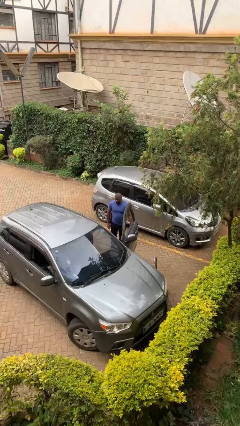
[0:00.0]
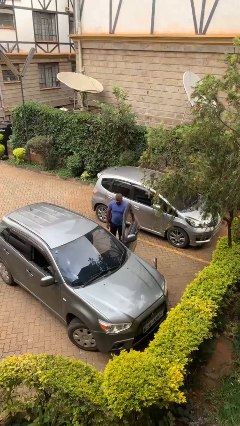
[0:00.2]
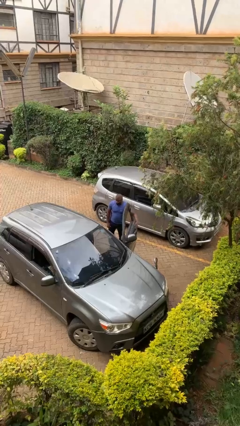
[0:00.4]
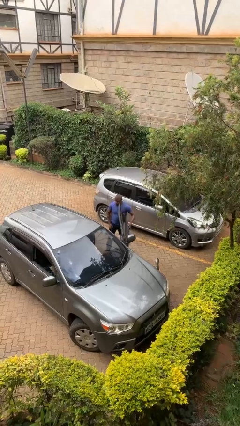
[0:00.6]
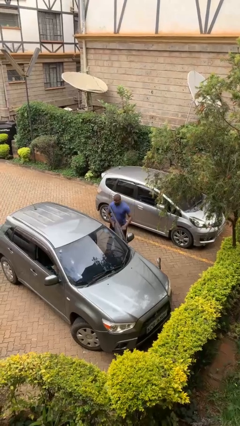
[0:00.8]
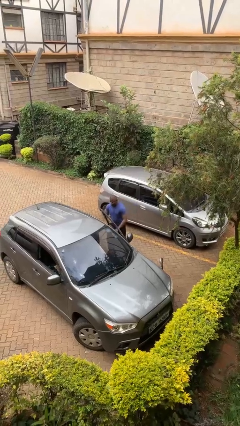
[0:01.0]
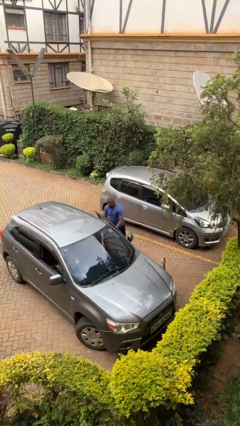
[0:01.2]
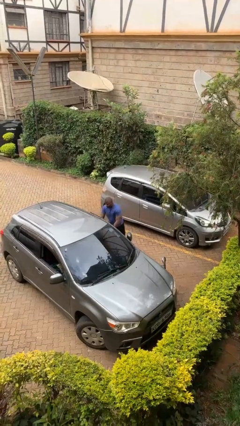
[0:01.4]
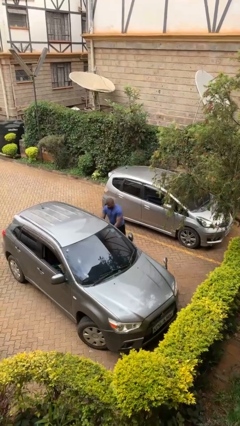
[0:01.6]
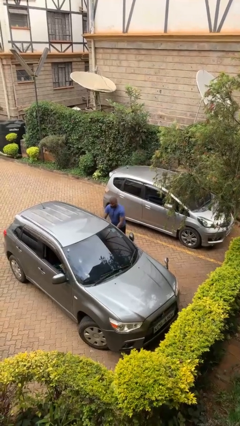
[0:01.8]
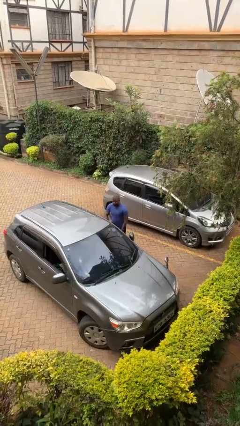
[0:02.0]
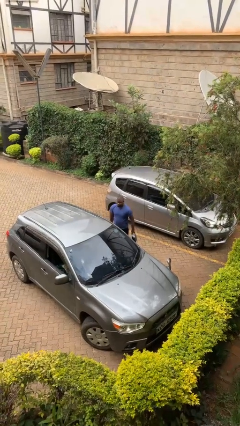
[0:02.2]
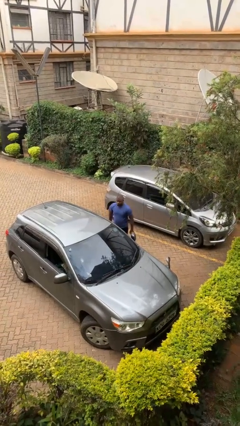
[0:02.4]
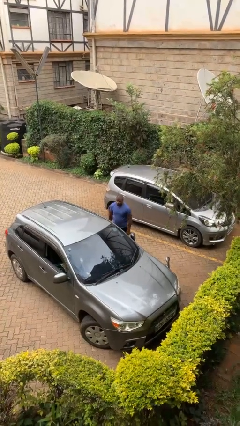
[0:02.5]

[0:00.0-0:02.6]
person closes car door

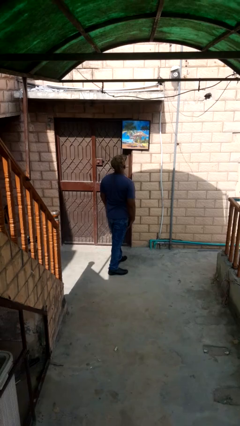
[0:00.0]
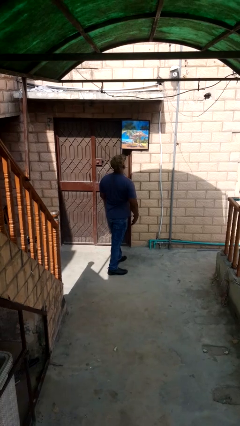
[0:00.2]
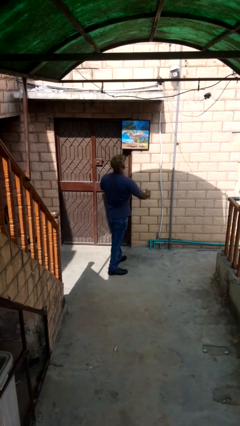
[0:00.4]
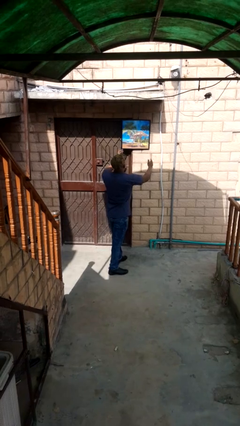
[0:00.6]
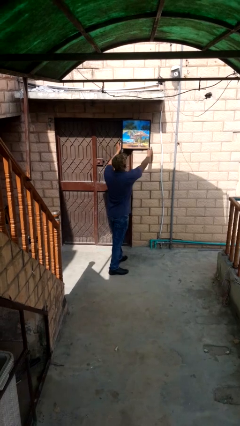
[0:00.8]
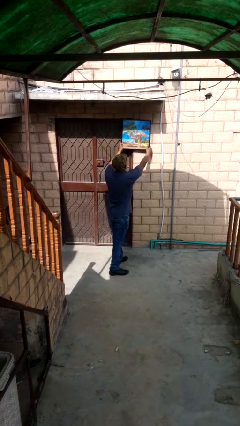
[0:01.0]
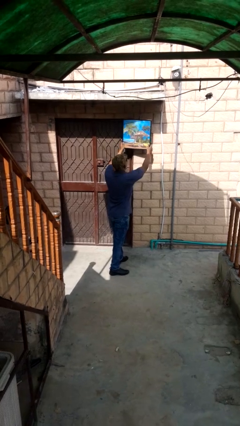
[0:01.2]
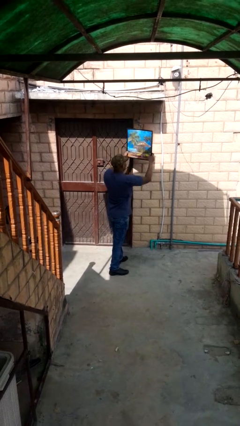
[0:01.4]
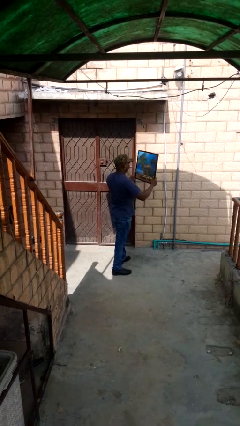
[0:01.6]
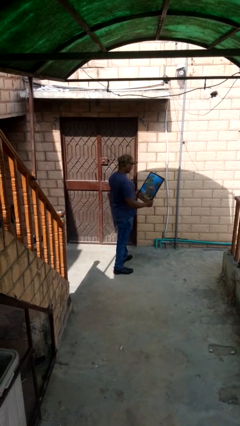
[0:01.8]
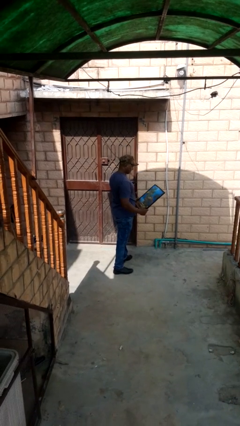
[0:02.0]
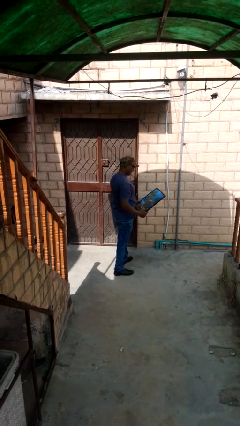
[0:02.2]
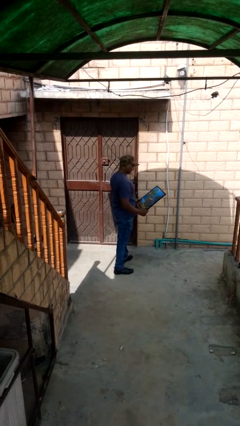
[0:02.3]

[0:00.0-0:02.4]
person takes down picture frame

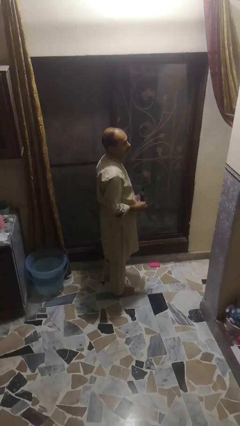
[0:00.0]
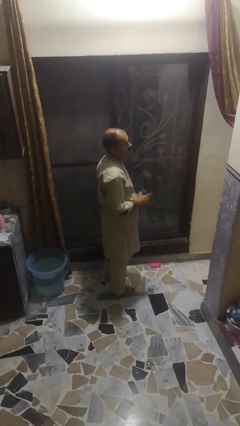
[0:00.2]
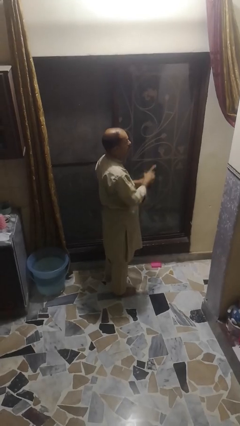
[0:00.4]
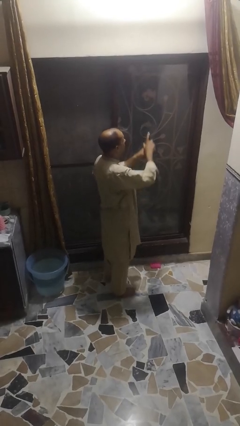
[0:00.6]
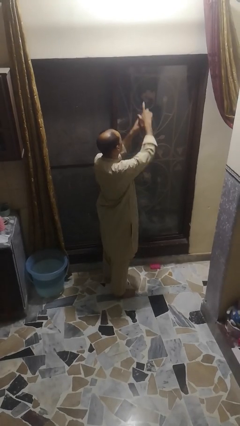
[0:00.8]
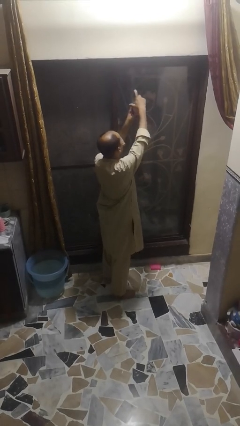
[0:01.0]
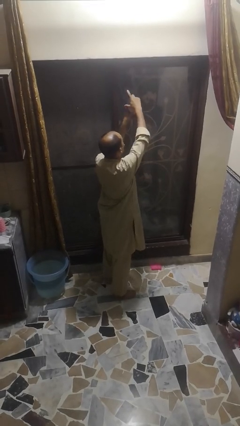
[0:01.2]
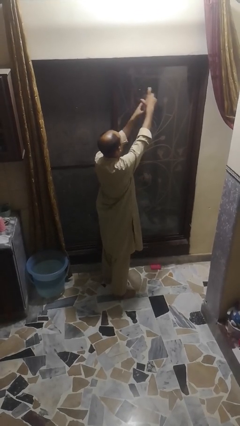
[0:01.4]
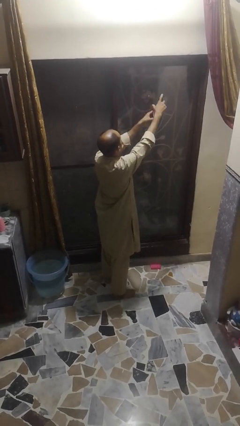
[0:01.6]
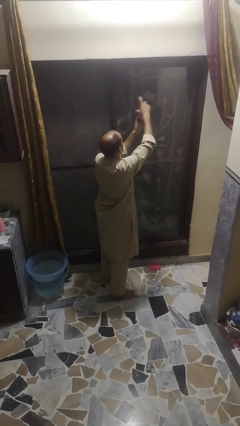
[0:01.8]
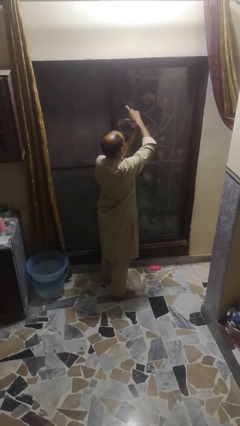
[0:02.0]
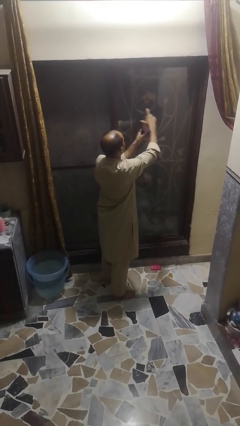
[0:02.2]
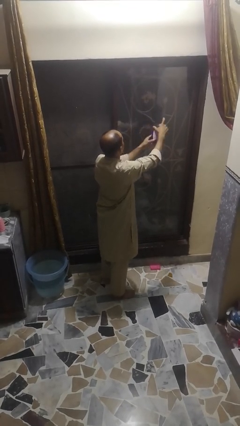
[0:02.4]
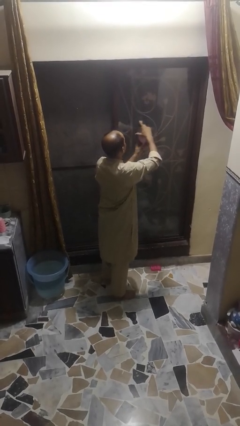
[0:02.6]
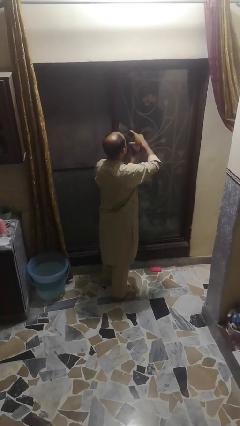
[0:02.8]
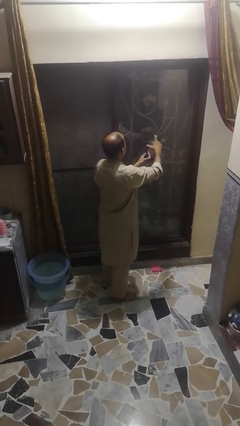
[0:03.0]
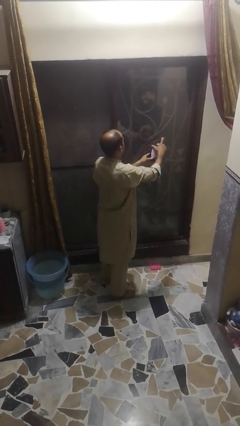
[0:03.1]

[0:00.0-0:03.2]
person sprays from bottle

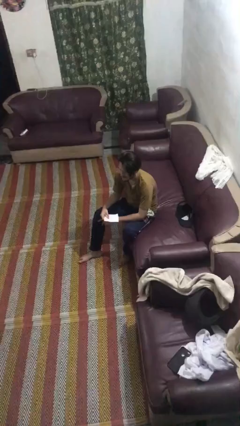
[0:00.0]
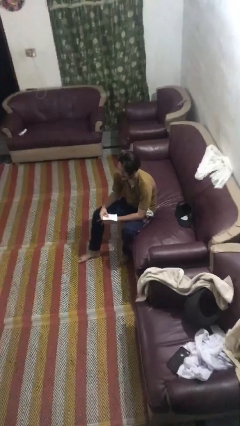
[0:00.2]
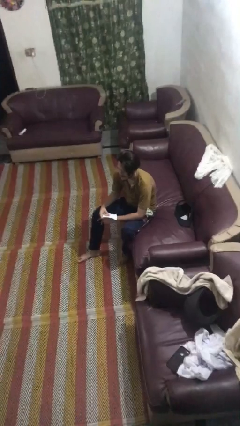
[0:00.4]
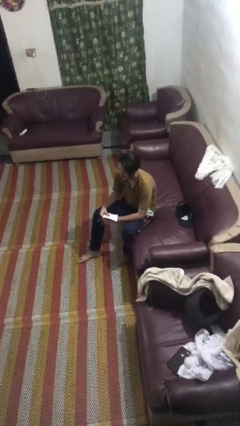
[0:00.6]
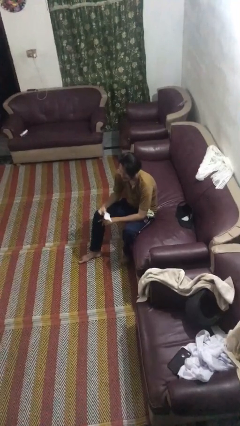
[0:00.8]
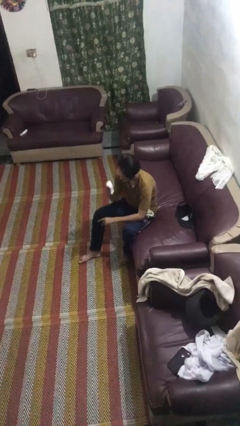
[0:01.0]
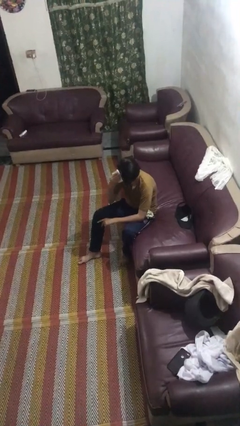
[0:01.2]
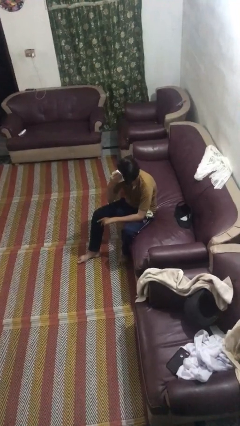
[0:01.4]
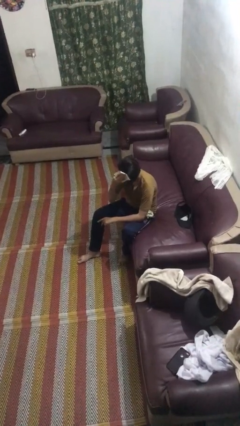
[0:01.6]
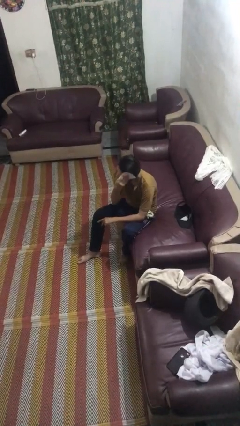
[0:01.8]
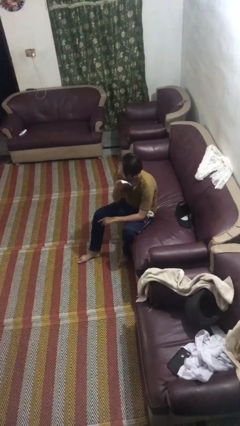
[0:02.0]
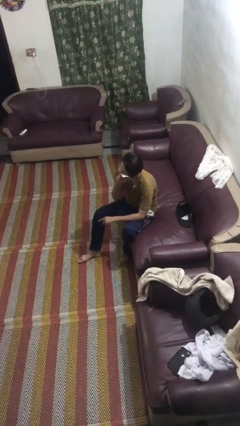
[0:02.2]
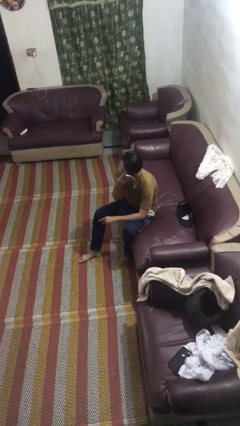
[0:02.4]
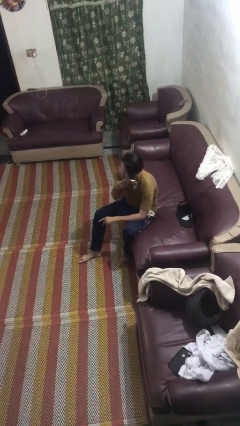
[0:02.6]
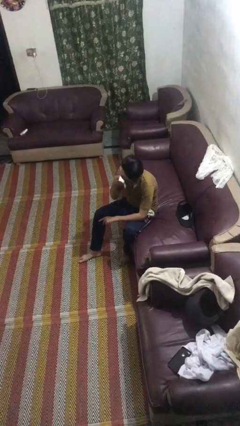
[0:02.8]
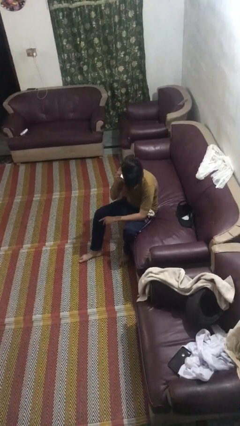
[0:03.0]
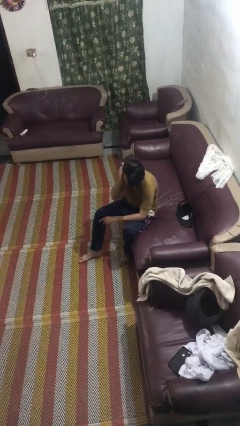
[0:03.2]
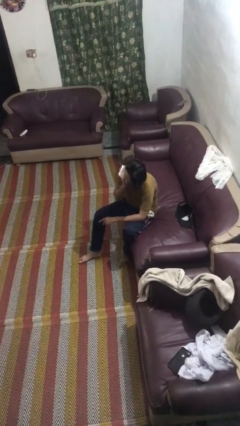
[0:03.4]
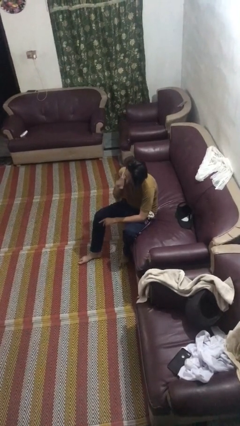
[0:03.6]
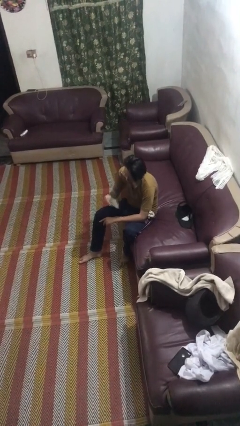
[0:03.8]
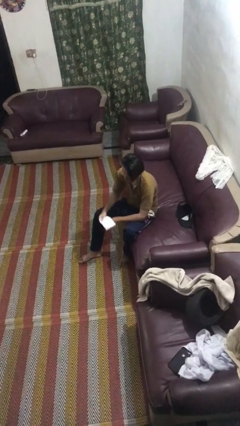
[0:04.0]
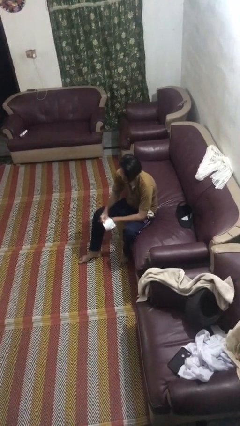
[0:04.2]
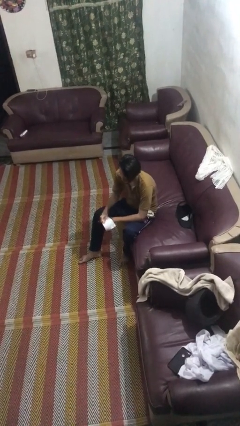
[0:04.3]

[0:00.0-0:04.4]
person wipes mouth with napkin

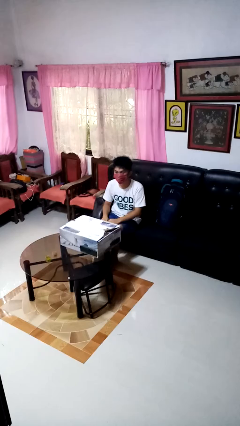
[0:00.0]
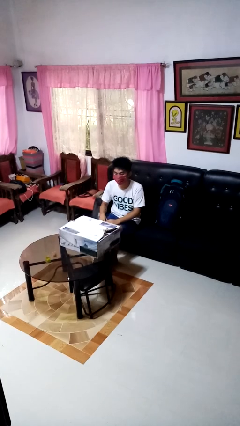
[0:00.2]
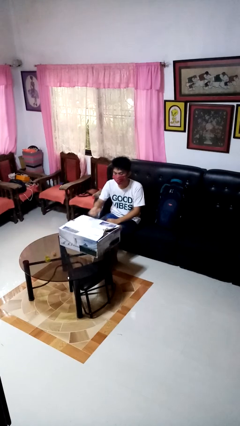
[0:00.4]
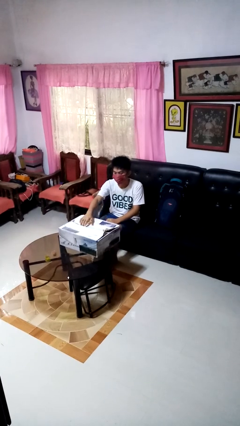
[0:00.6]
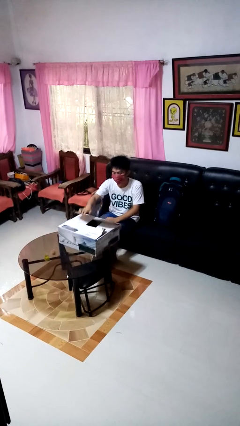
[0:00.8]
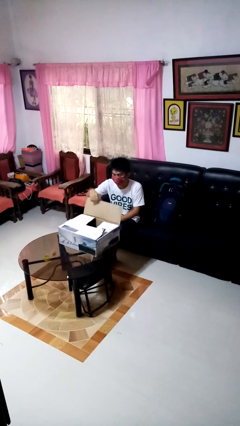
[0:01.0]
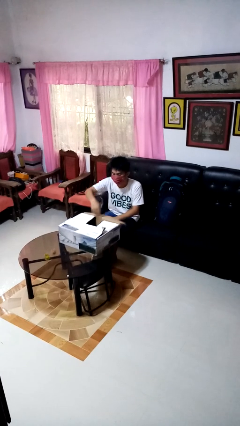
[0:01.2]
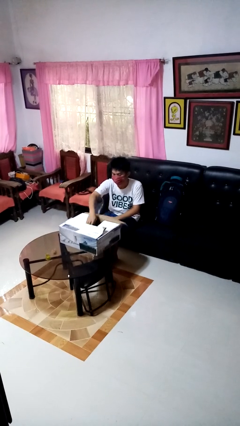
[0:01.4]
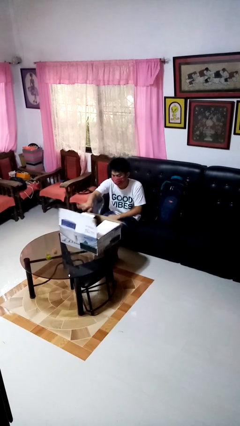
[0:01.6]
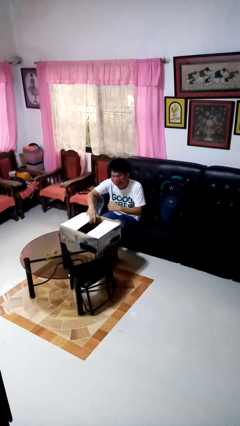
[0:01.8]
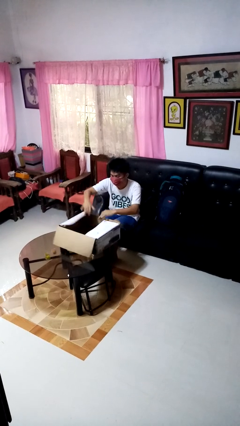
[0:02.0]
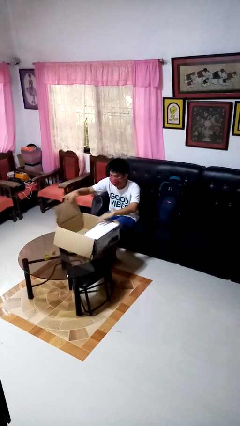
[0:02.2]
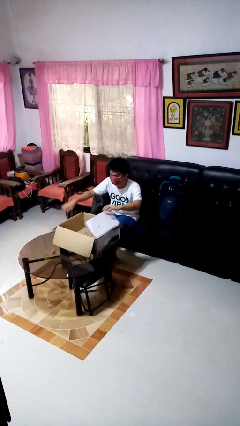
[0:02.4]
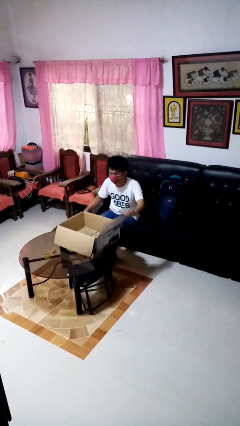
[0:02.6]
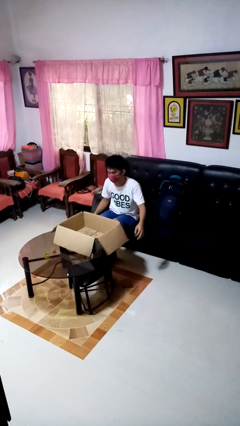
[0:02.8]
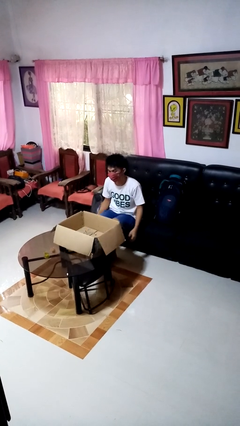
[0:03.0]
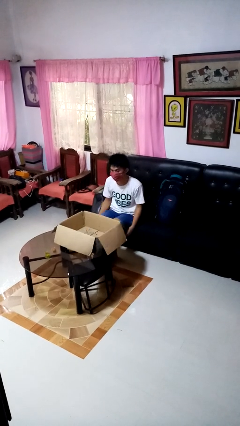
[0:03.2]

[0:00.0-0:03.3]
person opens box

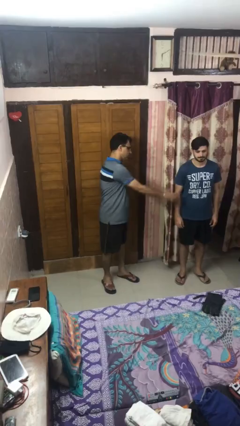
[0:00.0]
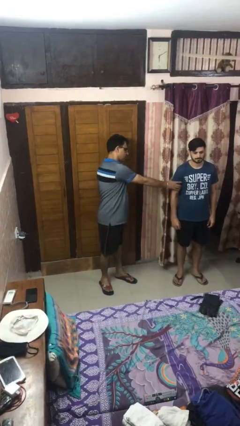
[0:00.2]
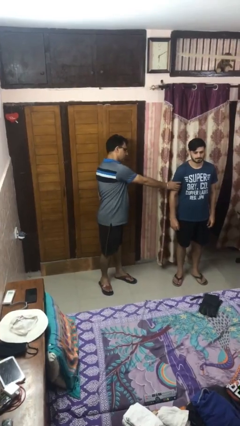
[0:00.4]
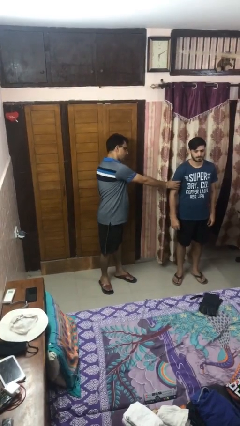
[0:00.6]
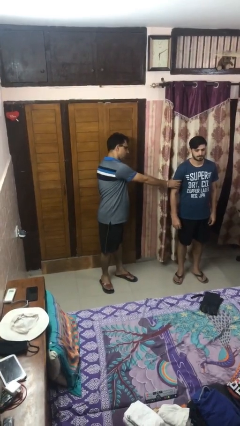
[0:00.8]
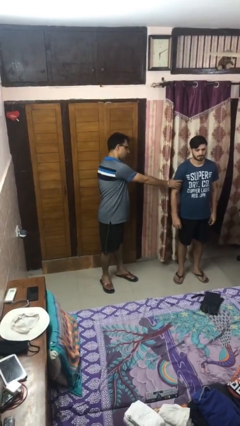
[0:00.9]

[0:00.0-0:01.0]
person grabs person by bicep

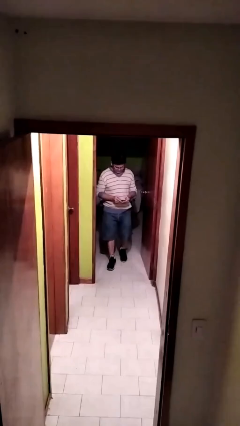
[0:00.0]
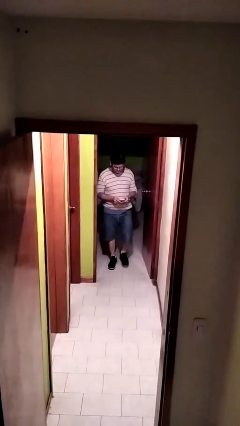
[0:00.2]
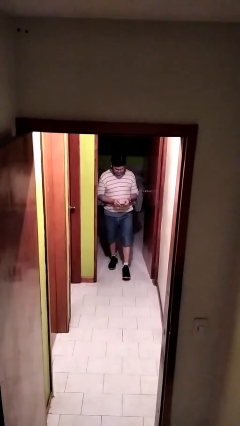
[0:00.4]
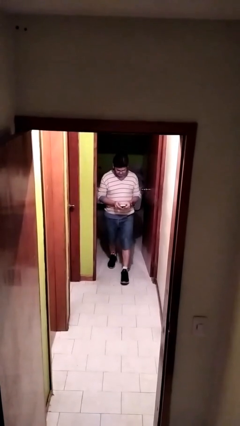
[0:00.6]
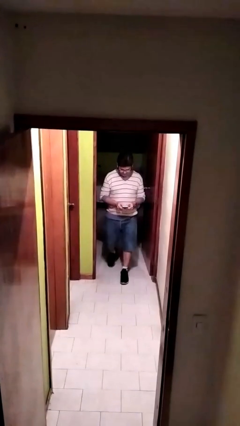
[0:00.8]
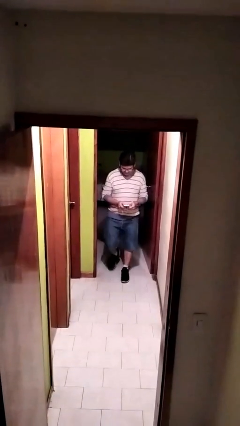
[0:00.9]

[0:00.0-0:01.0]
person enters scene through structure
